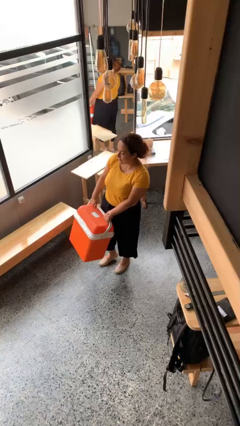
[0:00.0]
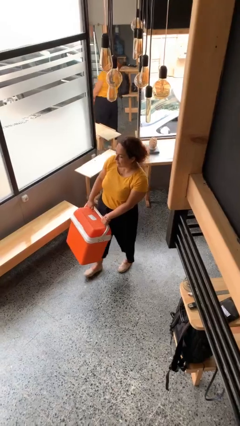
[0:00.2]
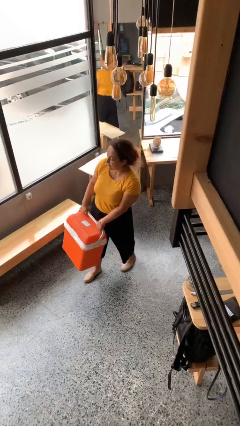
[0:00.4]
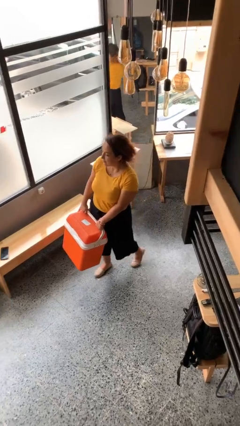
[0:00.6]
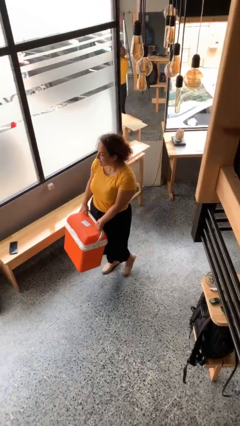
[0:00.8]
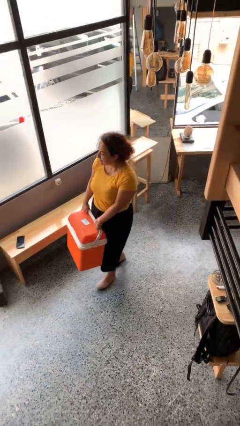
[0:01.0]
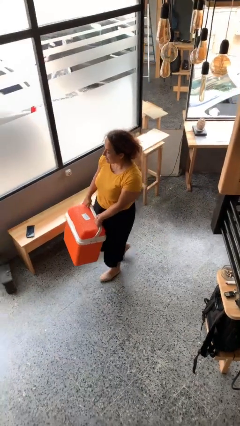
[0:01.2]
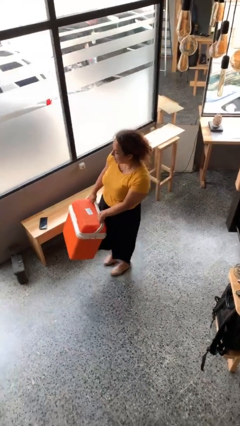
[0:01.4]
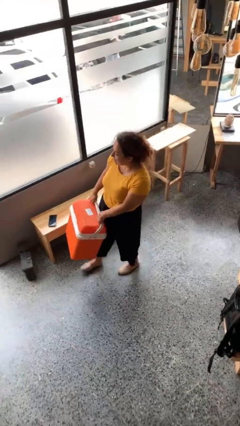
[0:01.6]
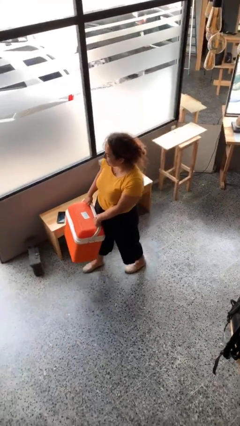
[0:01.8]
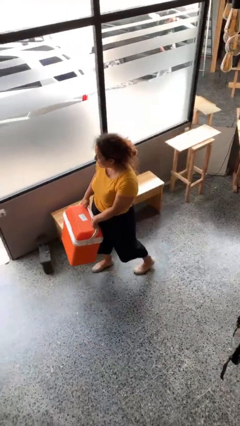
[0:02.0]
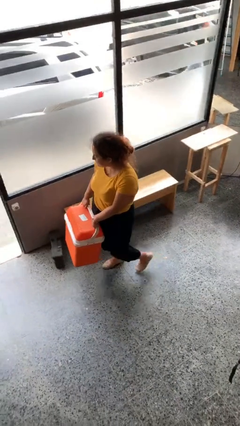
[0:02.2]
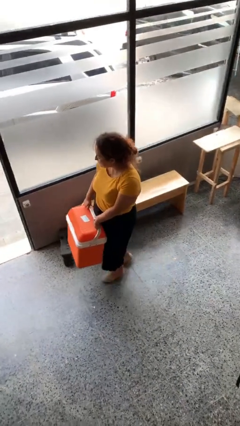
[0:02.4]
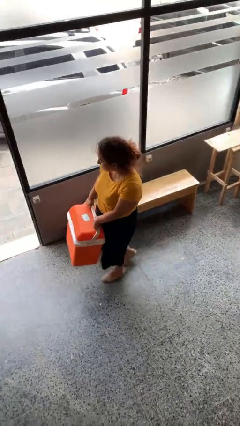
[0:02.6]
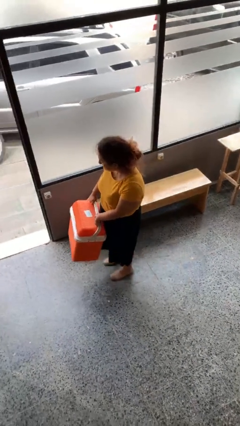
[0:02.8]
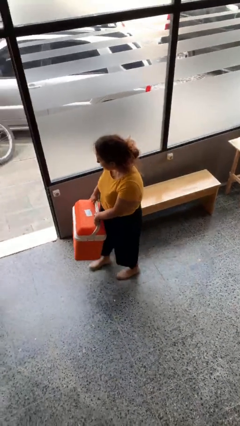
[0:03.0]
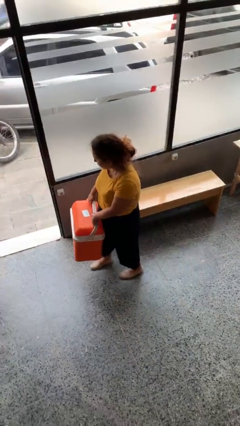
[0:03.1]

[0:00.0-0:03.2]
person carries heavy object

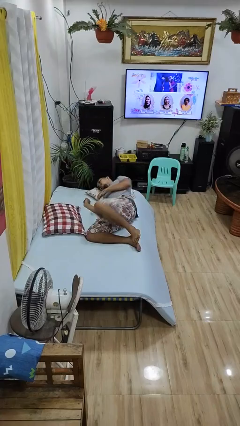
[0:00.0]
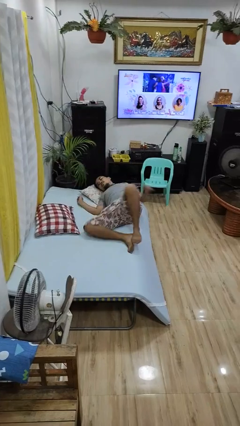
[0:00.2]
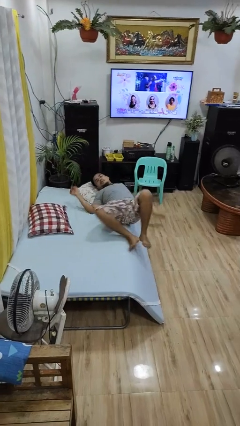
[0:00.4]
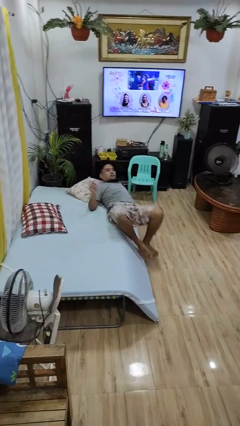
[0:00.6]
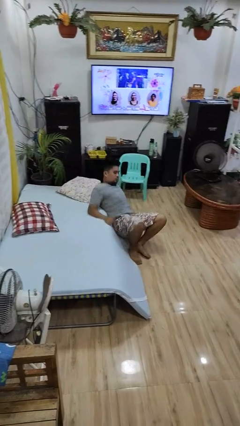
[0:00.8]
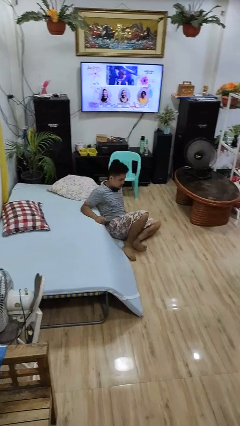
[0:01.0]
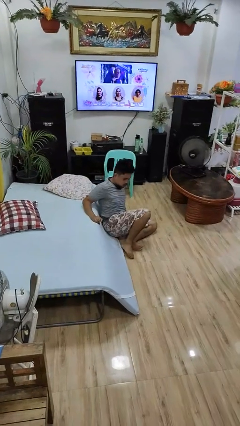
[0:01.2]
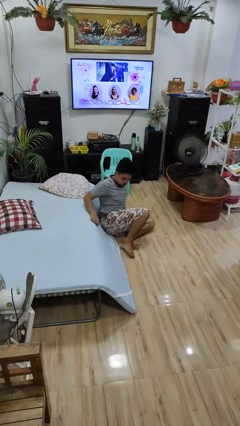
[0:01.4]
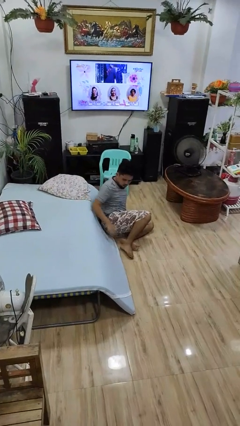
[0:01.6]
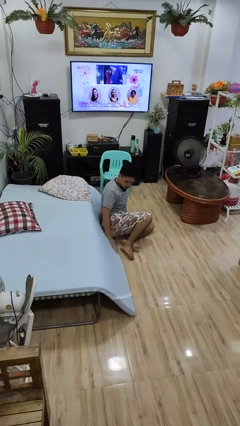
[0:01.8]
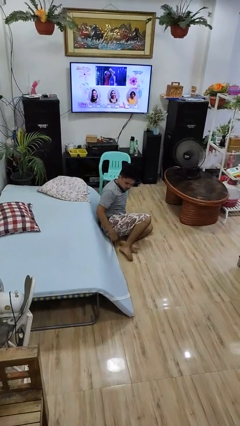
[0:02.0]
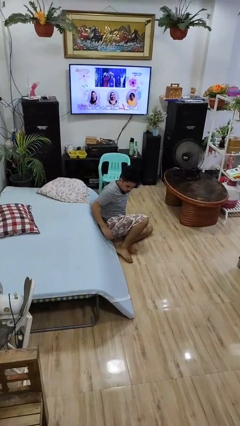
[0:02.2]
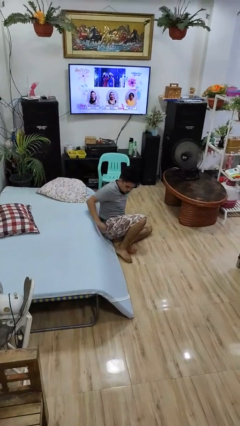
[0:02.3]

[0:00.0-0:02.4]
person falls from bed

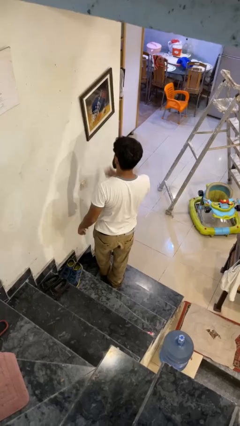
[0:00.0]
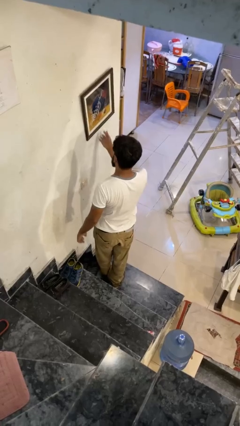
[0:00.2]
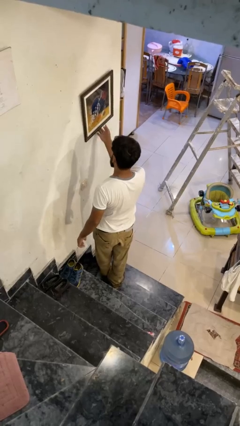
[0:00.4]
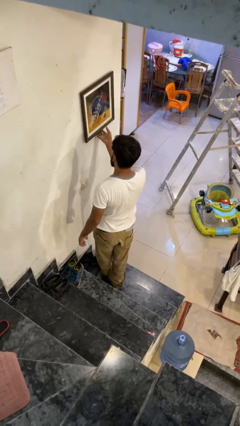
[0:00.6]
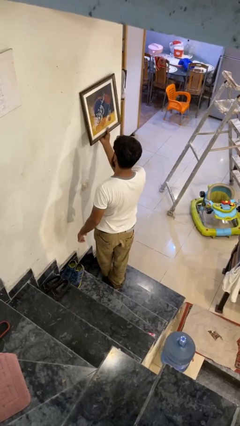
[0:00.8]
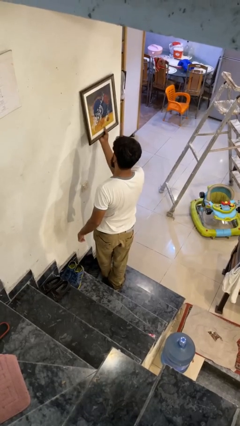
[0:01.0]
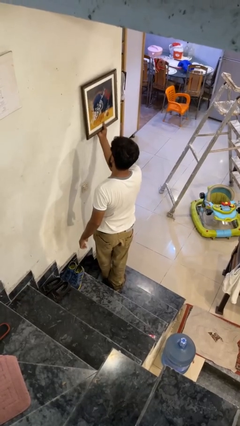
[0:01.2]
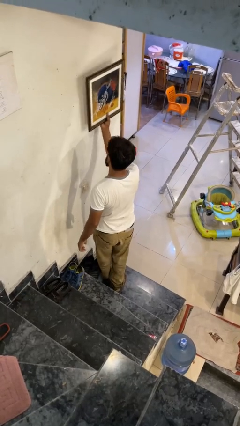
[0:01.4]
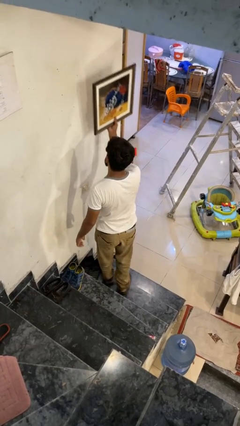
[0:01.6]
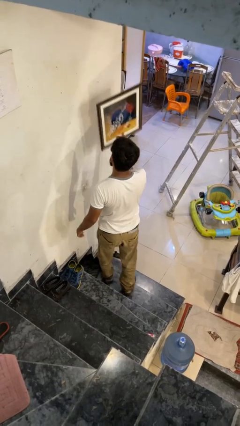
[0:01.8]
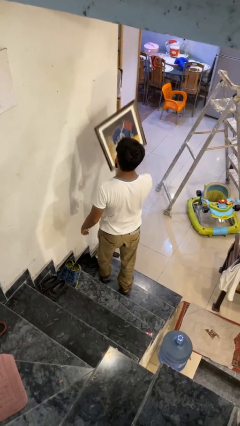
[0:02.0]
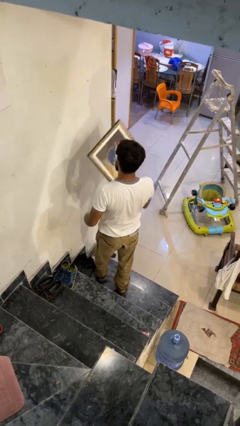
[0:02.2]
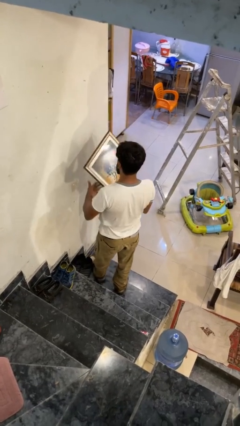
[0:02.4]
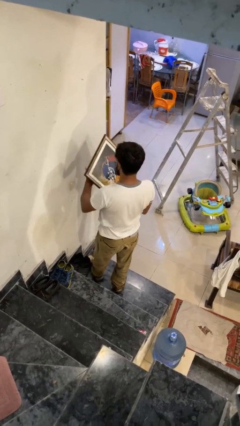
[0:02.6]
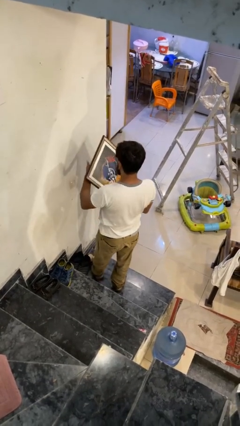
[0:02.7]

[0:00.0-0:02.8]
person takes down picture frame

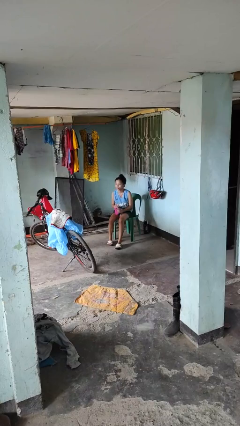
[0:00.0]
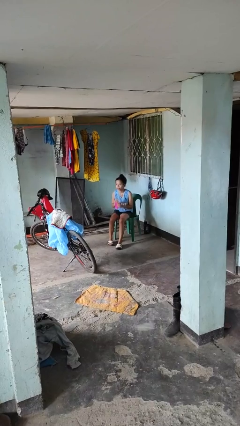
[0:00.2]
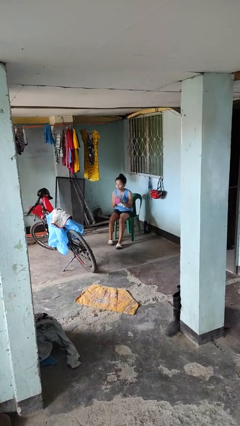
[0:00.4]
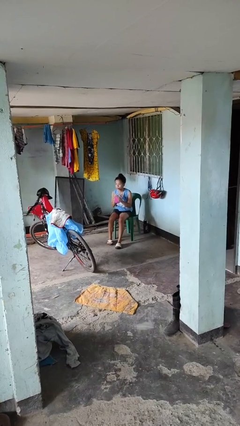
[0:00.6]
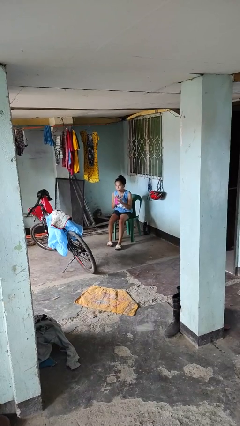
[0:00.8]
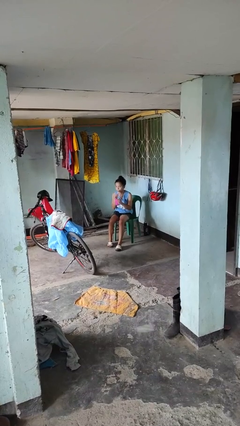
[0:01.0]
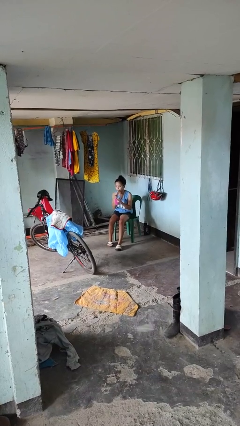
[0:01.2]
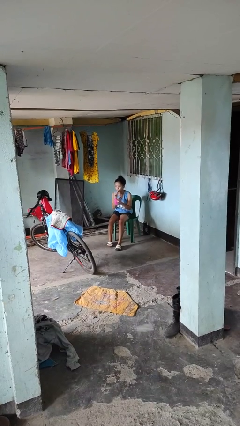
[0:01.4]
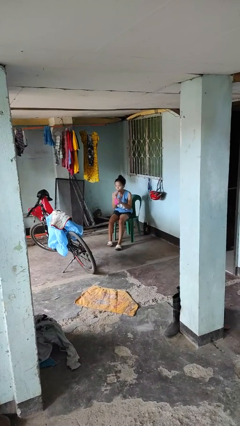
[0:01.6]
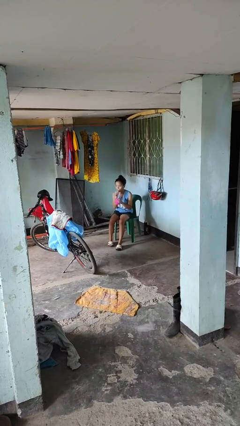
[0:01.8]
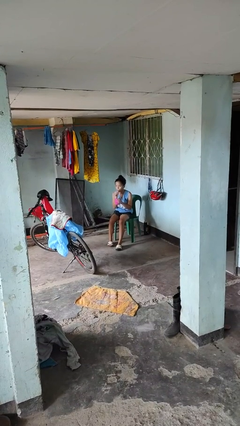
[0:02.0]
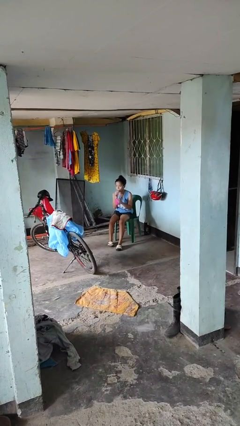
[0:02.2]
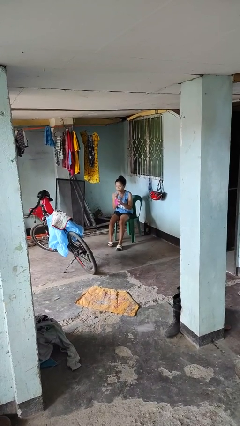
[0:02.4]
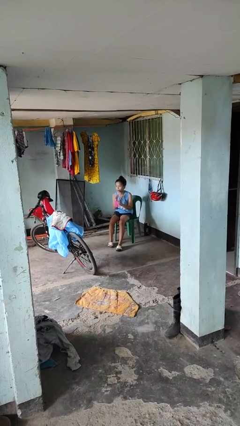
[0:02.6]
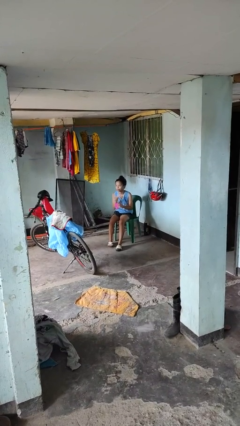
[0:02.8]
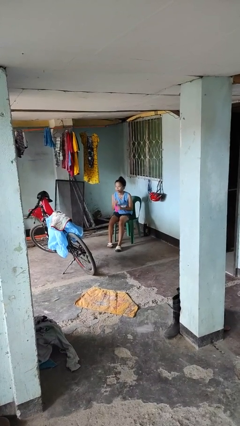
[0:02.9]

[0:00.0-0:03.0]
person drinks from straw

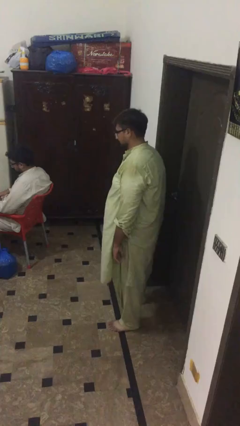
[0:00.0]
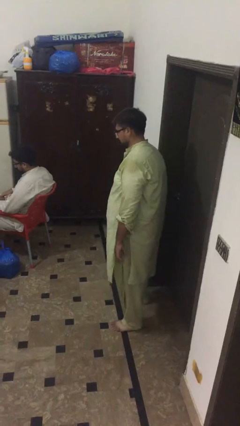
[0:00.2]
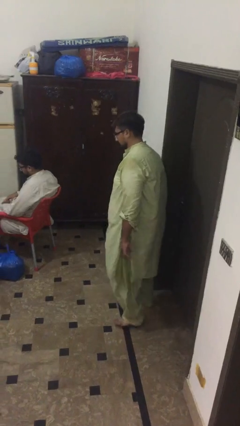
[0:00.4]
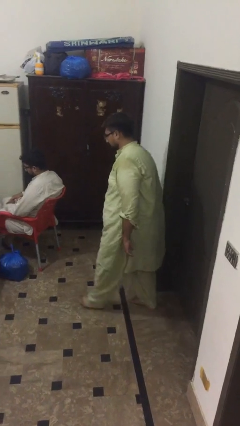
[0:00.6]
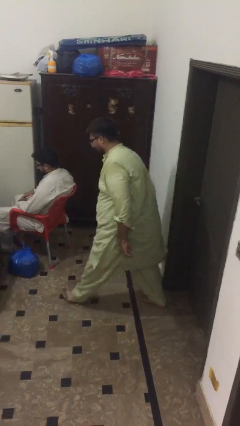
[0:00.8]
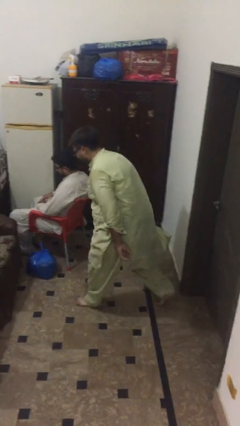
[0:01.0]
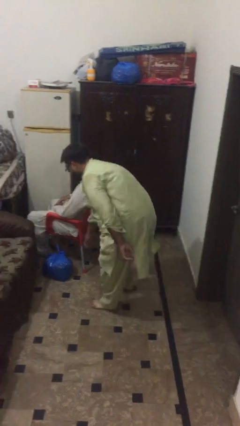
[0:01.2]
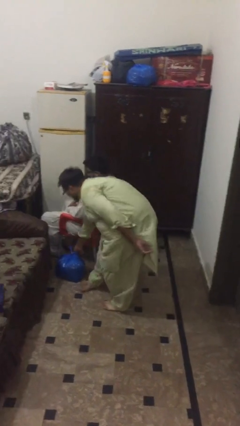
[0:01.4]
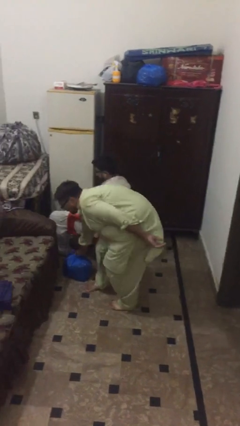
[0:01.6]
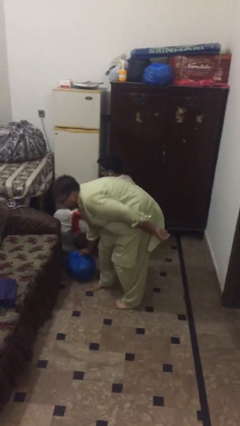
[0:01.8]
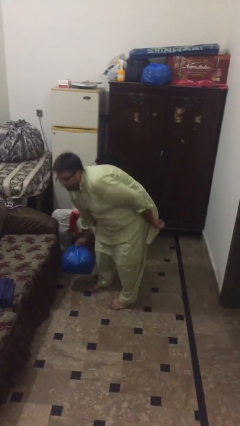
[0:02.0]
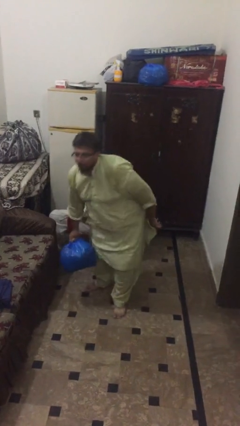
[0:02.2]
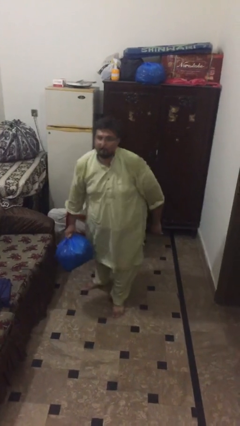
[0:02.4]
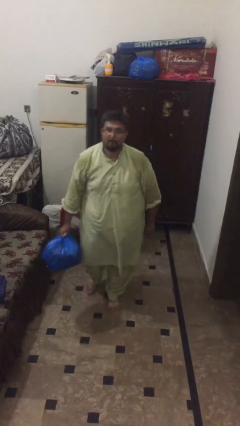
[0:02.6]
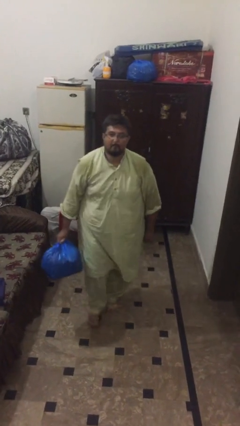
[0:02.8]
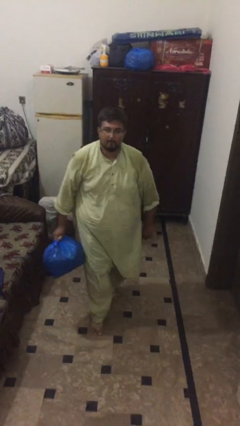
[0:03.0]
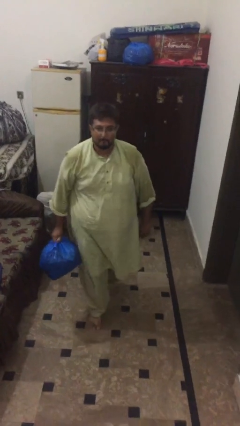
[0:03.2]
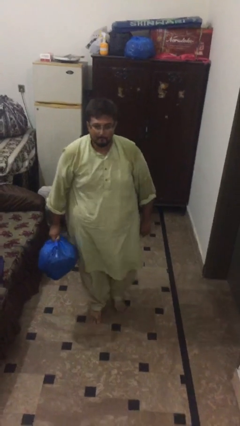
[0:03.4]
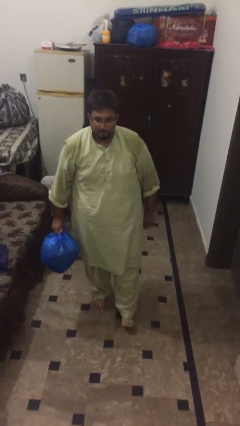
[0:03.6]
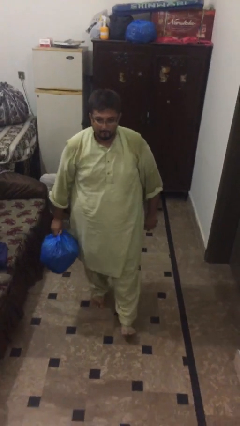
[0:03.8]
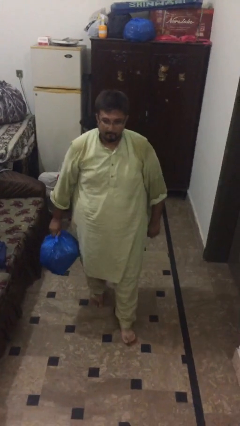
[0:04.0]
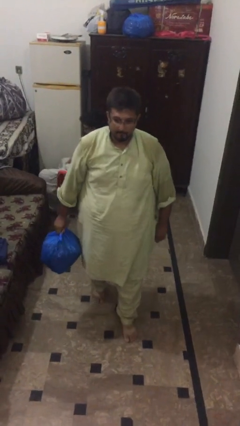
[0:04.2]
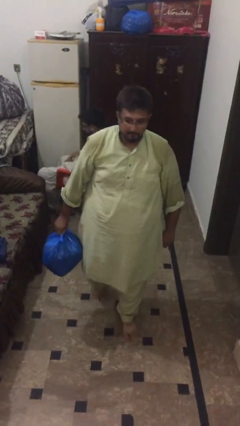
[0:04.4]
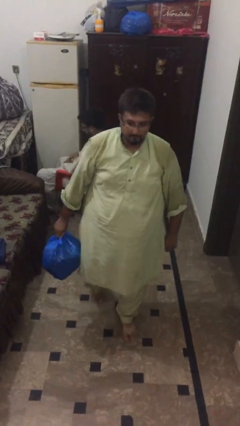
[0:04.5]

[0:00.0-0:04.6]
person steals object from person

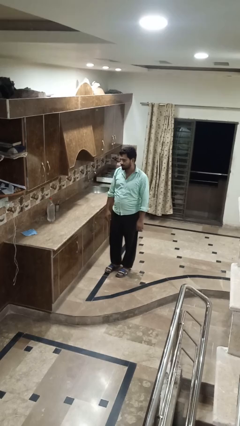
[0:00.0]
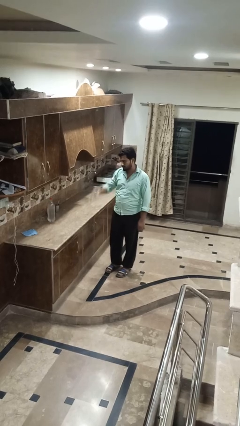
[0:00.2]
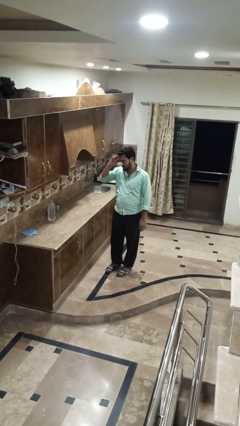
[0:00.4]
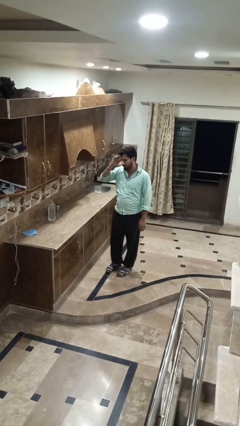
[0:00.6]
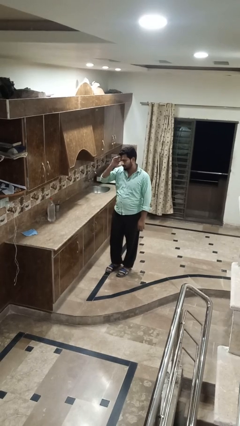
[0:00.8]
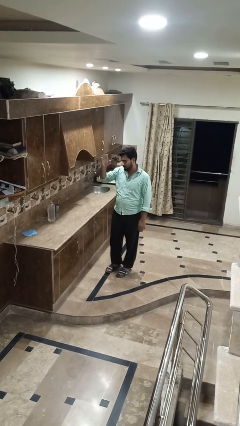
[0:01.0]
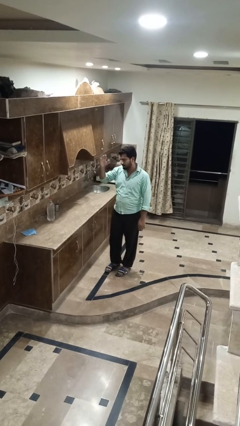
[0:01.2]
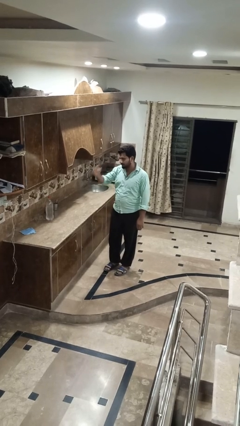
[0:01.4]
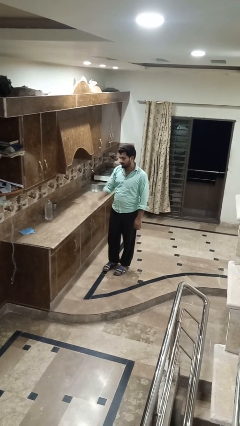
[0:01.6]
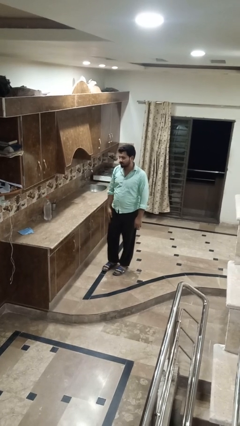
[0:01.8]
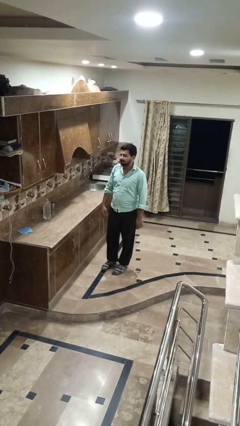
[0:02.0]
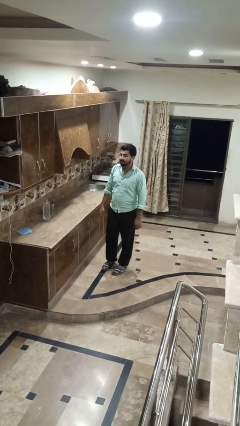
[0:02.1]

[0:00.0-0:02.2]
person salutes
